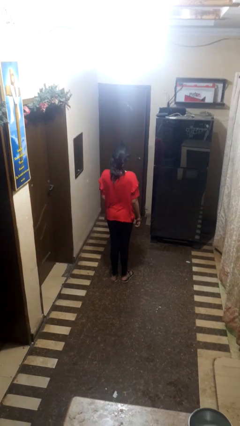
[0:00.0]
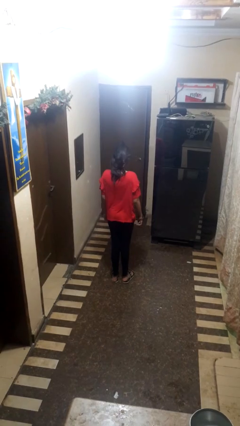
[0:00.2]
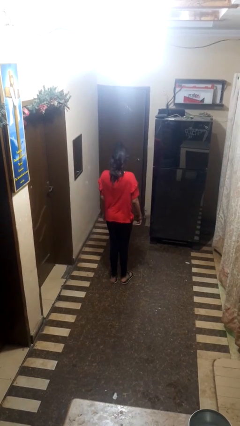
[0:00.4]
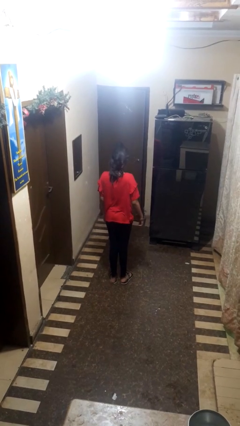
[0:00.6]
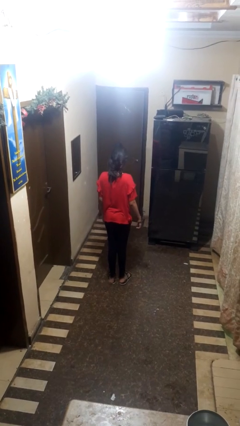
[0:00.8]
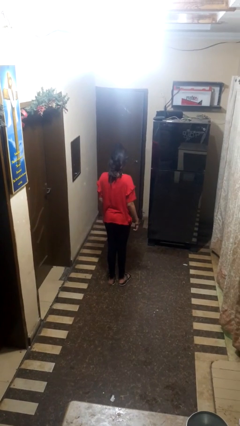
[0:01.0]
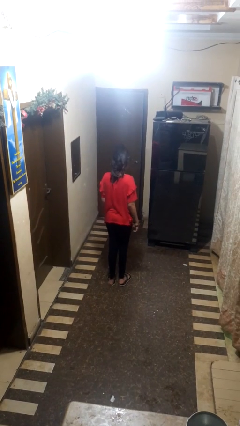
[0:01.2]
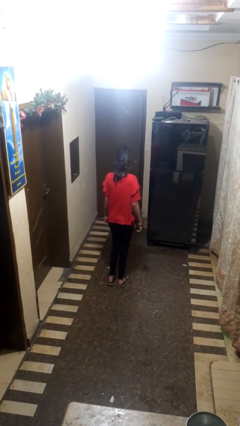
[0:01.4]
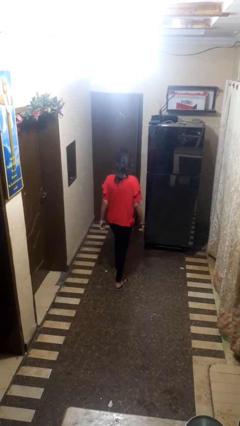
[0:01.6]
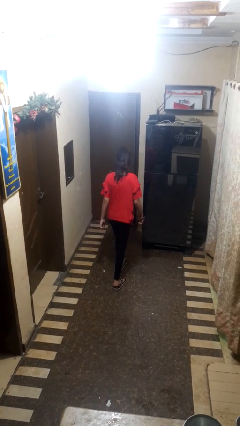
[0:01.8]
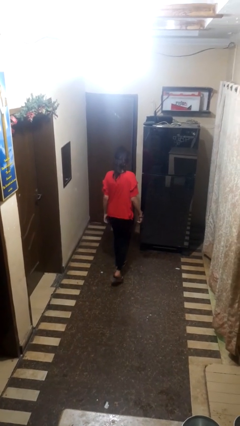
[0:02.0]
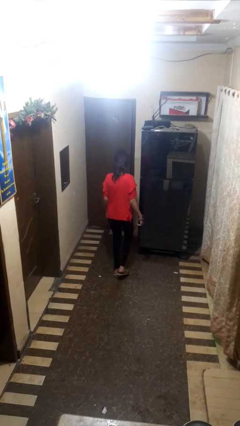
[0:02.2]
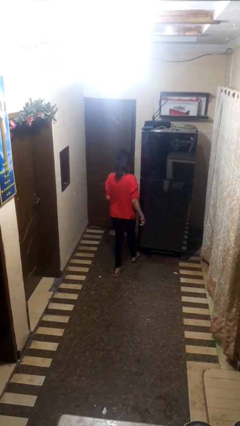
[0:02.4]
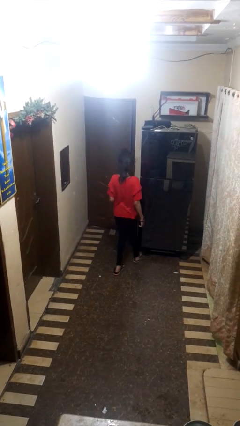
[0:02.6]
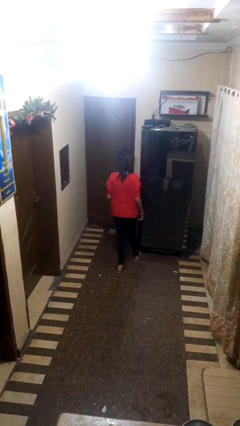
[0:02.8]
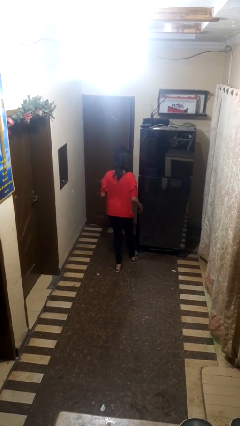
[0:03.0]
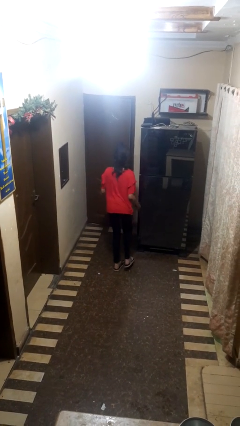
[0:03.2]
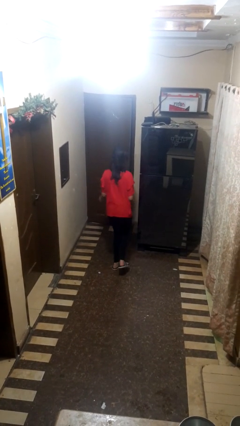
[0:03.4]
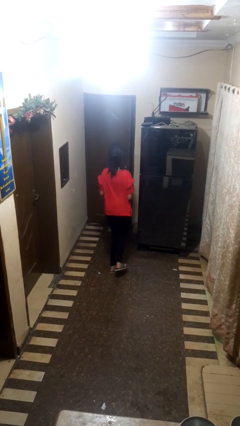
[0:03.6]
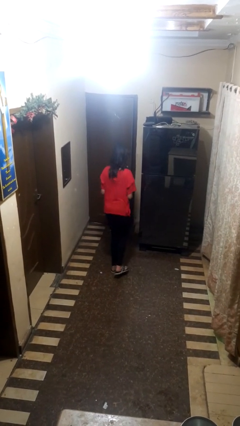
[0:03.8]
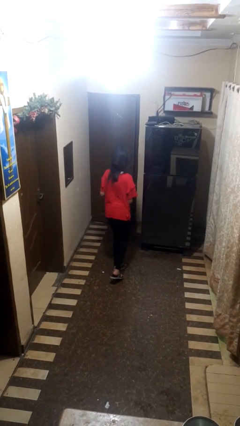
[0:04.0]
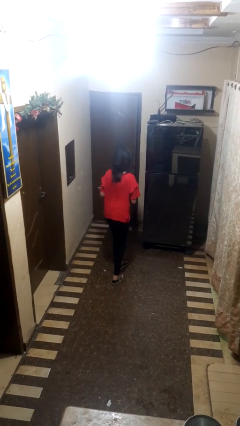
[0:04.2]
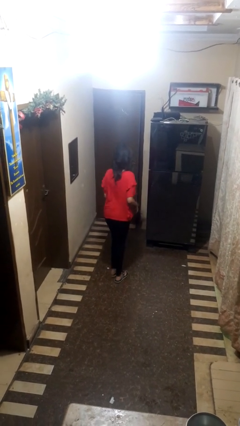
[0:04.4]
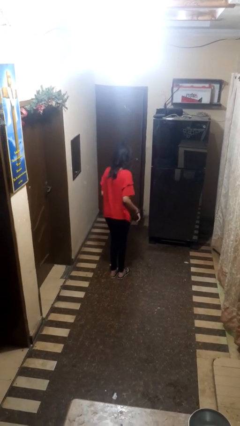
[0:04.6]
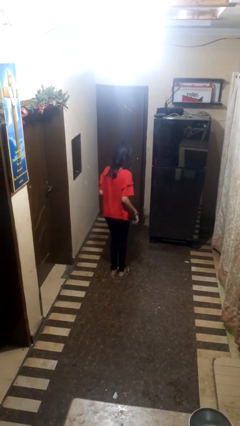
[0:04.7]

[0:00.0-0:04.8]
person stubs toe

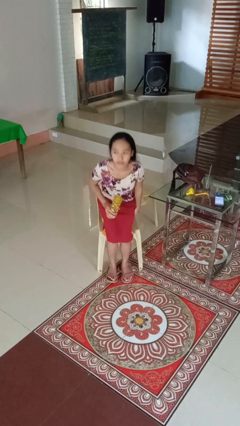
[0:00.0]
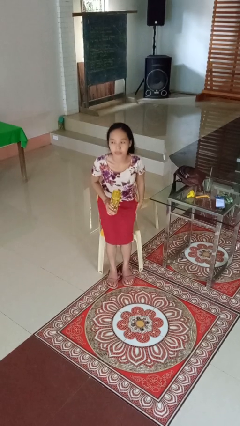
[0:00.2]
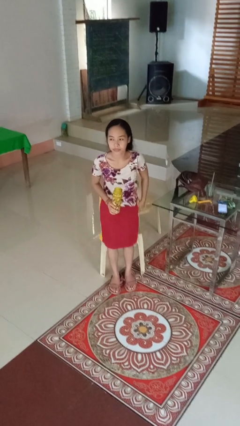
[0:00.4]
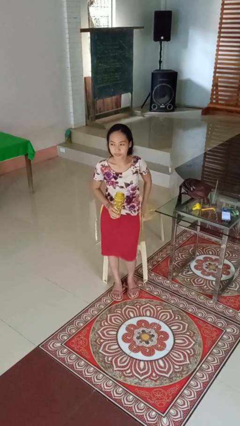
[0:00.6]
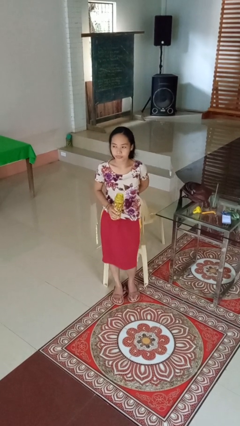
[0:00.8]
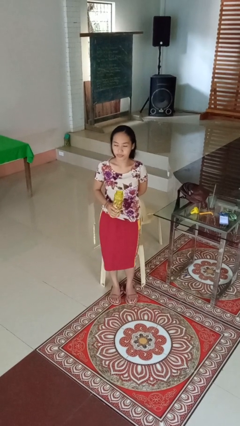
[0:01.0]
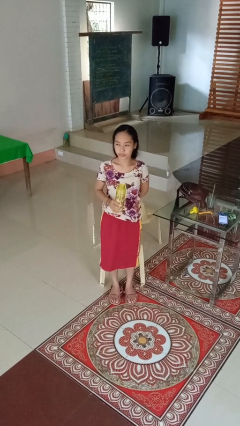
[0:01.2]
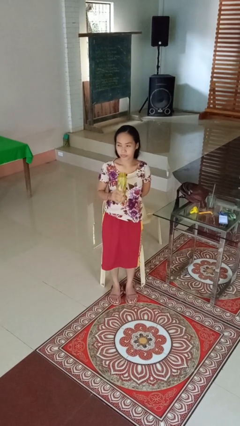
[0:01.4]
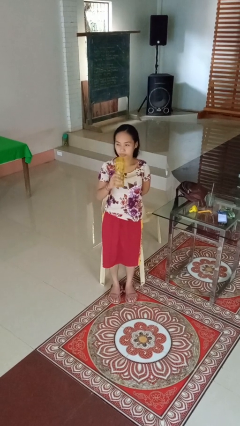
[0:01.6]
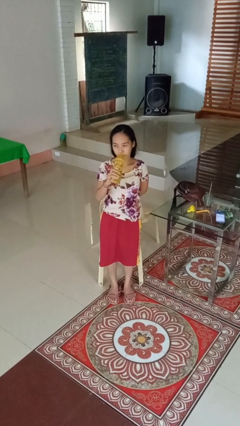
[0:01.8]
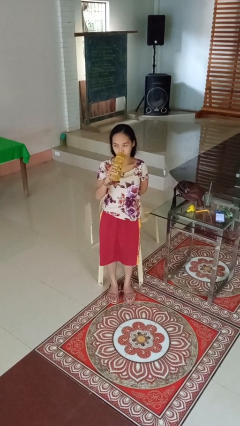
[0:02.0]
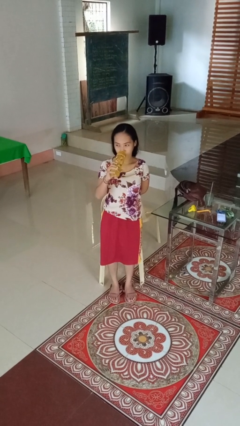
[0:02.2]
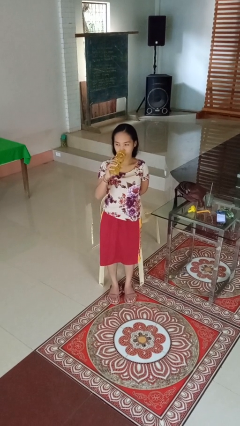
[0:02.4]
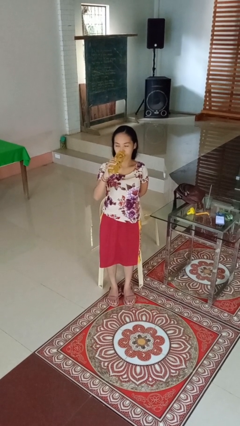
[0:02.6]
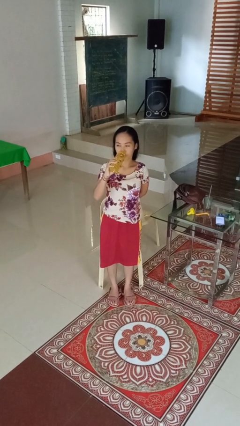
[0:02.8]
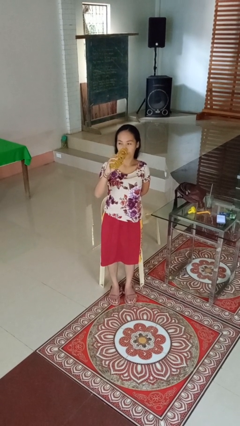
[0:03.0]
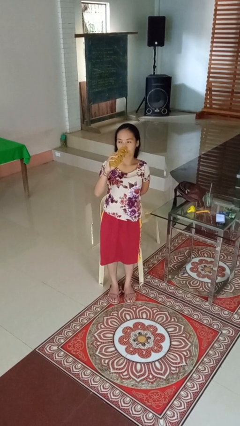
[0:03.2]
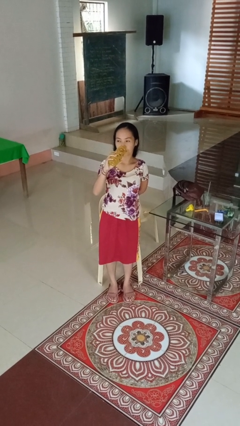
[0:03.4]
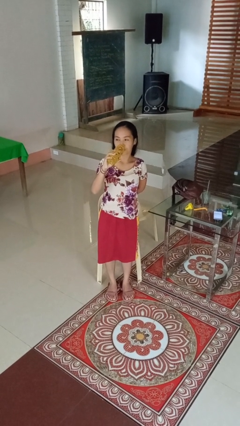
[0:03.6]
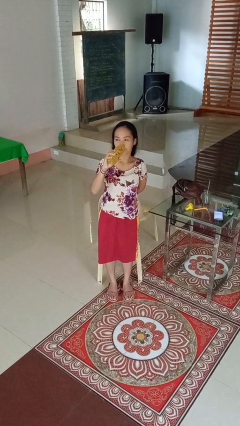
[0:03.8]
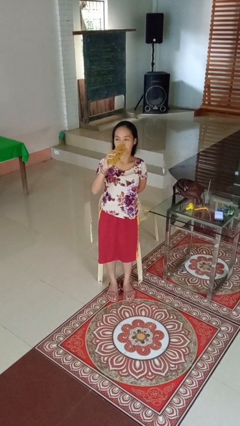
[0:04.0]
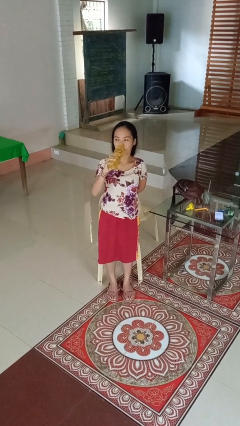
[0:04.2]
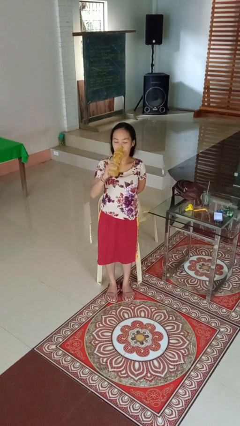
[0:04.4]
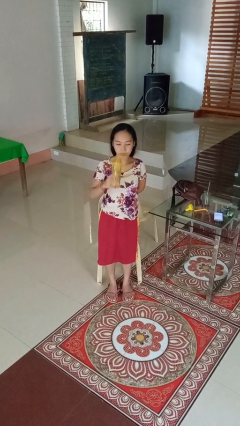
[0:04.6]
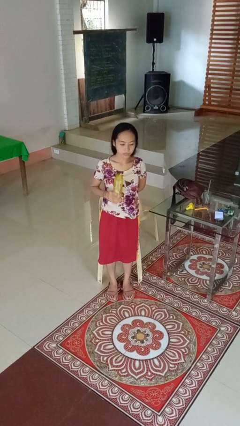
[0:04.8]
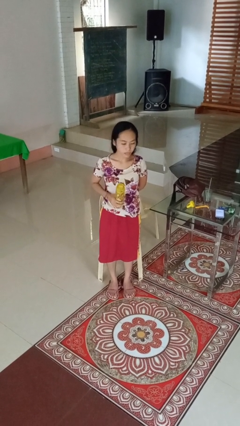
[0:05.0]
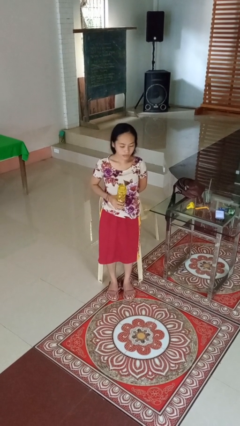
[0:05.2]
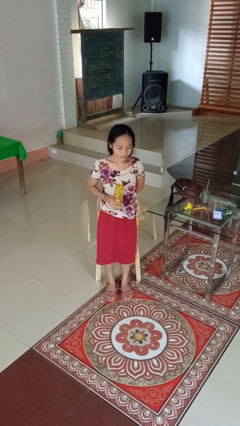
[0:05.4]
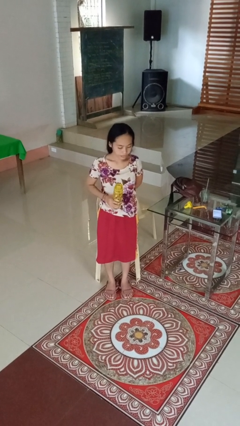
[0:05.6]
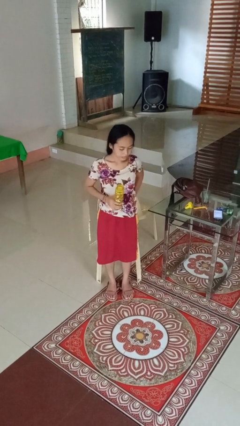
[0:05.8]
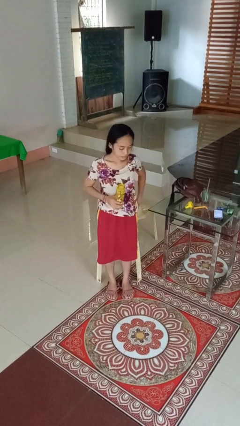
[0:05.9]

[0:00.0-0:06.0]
person drinks from bottle

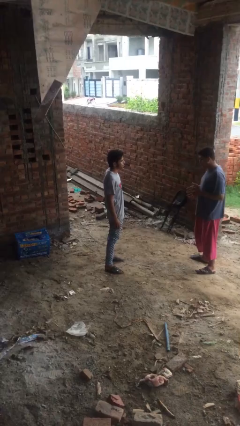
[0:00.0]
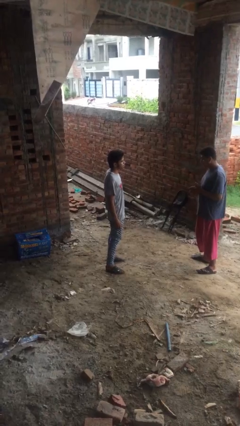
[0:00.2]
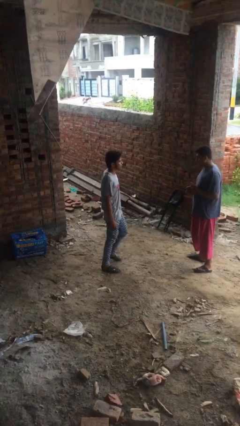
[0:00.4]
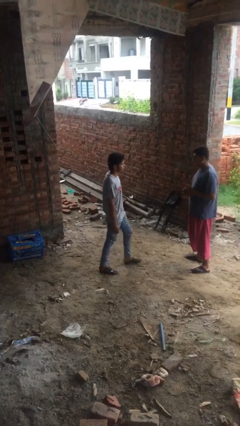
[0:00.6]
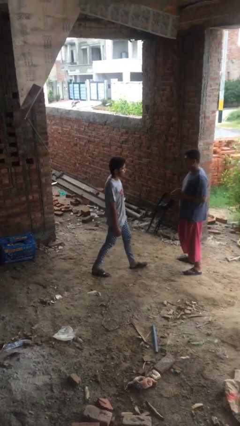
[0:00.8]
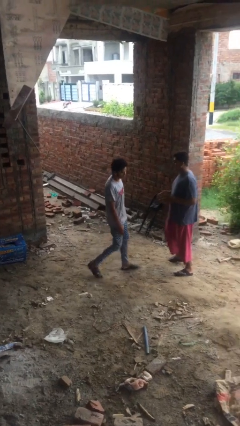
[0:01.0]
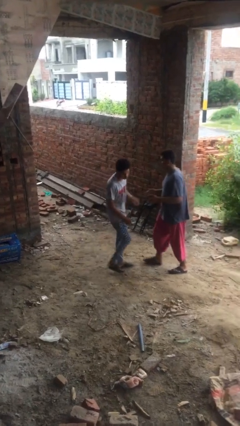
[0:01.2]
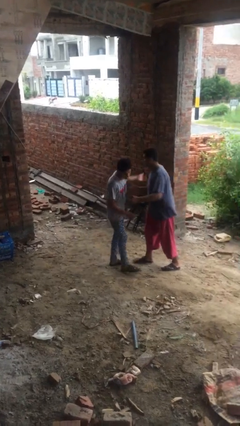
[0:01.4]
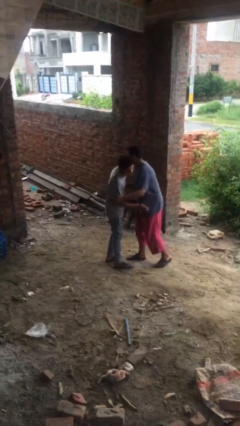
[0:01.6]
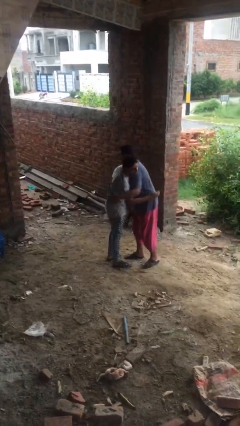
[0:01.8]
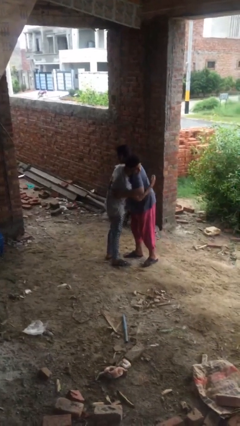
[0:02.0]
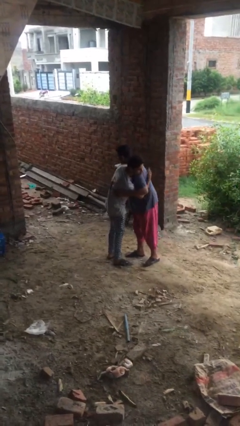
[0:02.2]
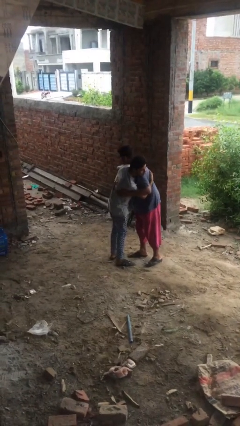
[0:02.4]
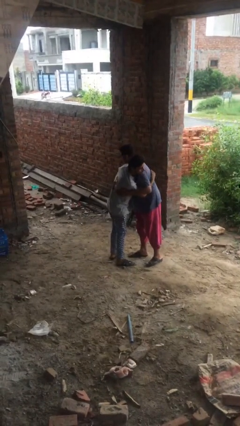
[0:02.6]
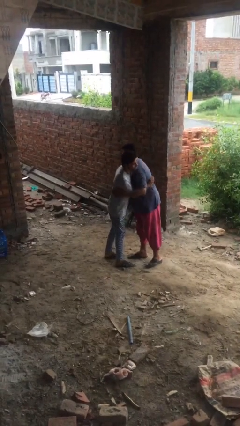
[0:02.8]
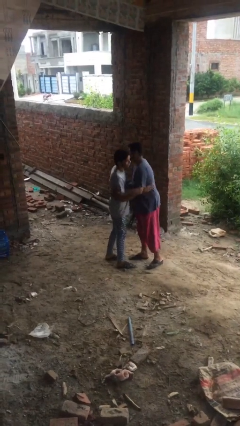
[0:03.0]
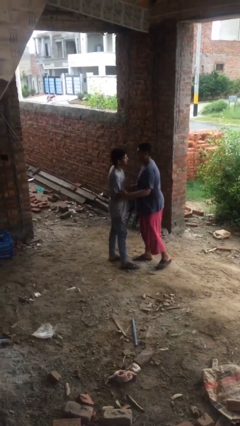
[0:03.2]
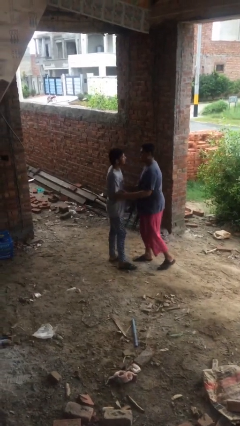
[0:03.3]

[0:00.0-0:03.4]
person embraces person

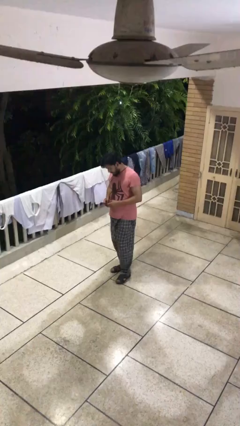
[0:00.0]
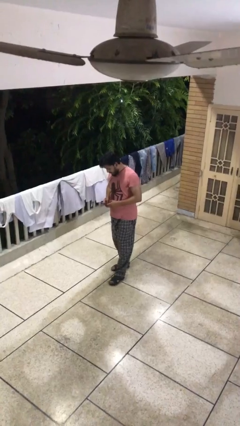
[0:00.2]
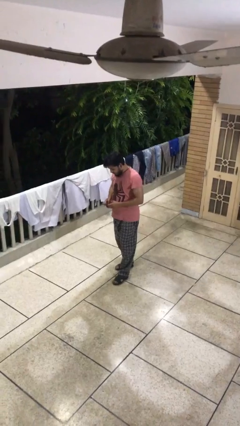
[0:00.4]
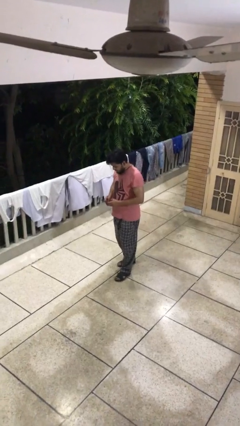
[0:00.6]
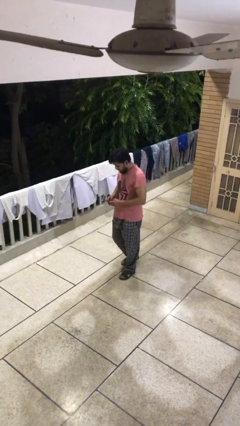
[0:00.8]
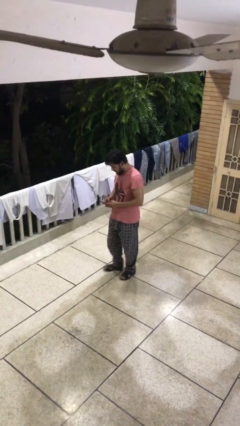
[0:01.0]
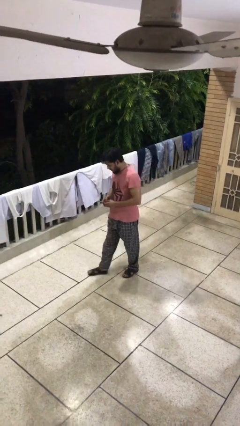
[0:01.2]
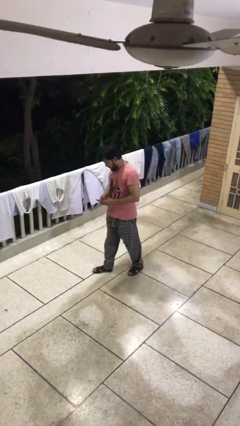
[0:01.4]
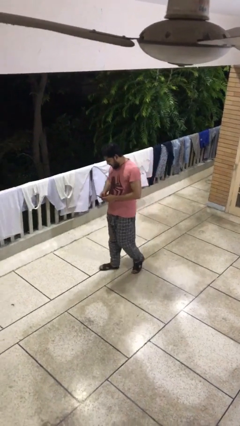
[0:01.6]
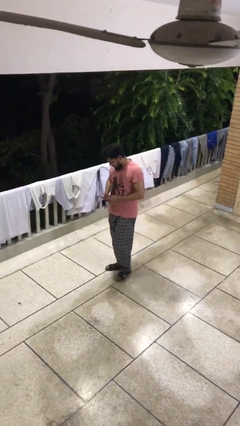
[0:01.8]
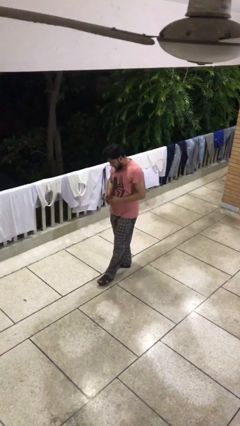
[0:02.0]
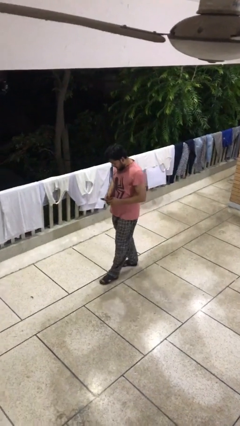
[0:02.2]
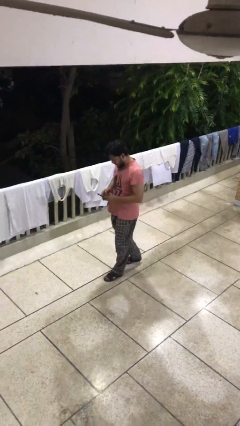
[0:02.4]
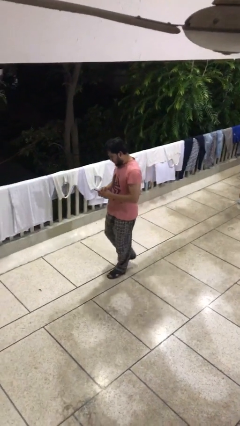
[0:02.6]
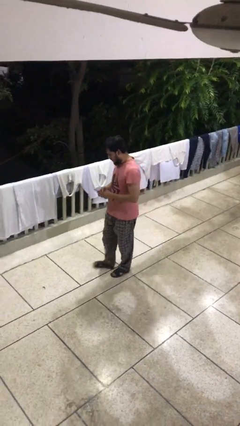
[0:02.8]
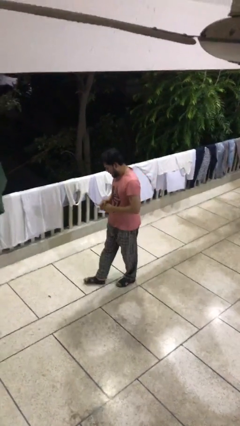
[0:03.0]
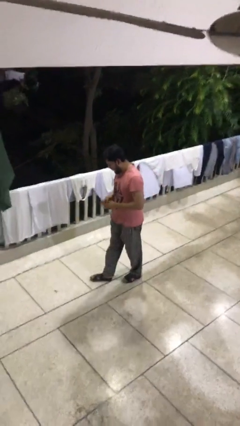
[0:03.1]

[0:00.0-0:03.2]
person texts on phone

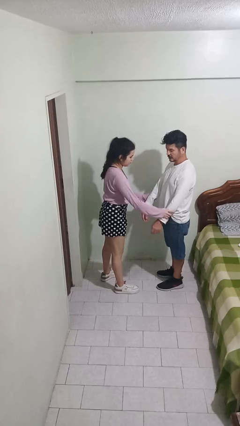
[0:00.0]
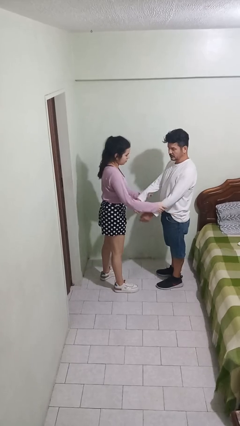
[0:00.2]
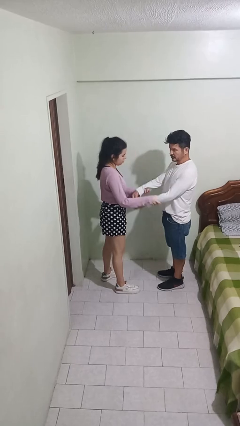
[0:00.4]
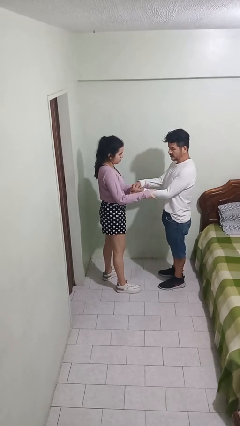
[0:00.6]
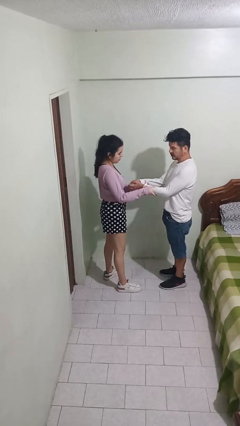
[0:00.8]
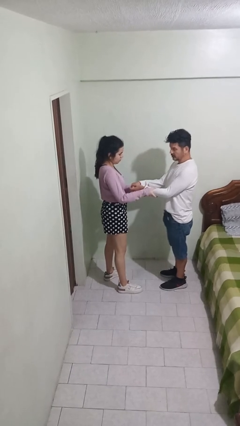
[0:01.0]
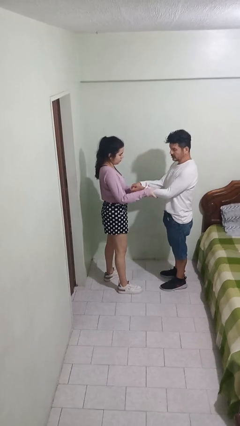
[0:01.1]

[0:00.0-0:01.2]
person grabs person by forearm
